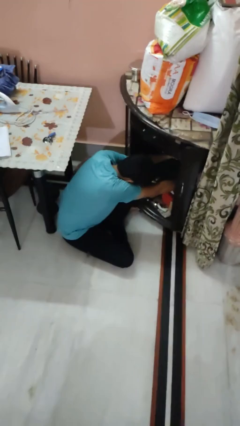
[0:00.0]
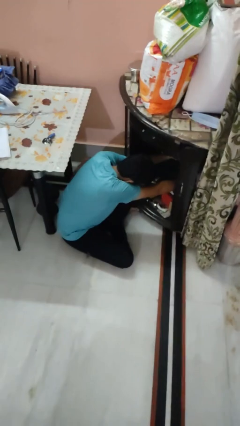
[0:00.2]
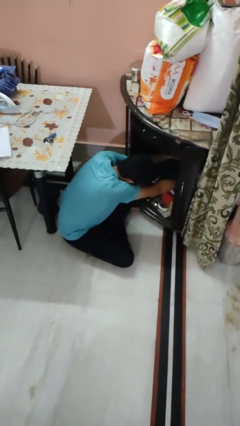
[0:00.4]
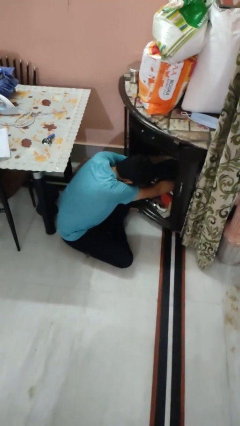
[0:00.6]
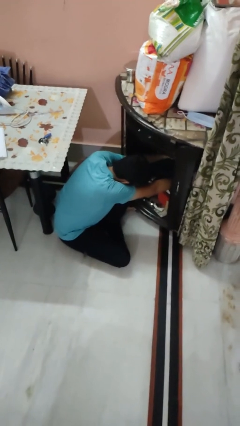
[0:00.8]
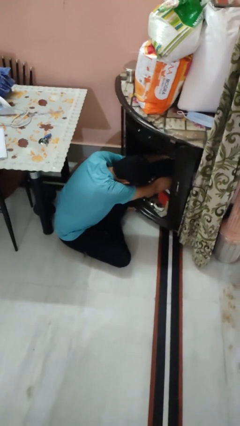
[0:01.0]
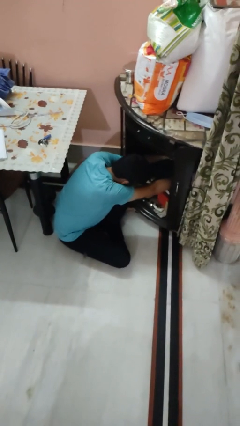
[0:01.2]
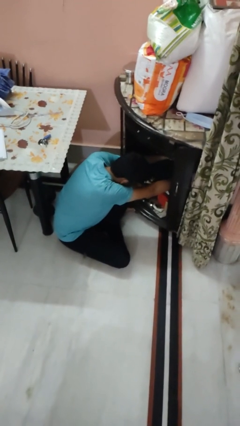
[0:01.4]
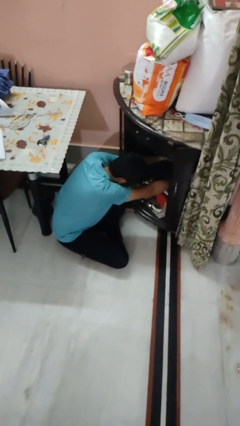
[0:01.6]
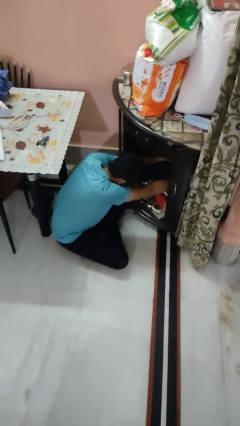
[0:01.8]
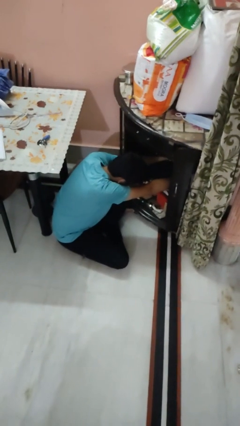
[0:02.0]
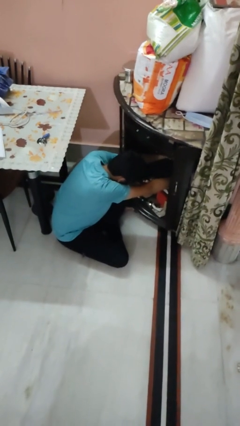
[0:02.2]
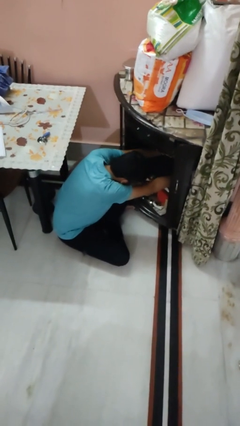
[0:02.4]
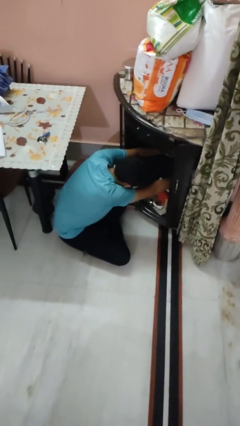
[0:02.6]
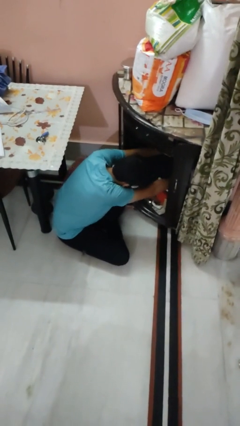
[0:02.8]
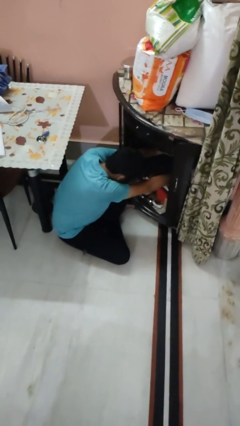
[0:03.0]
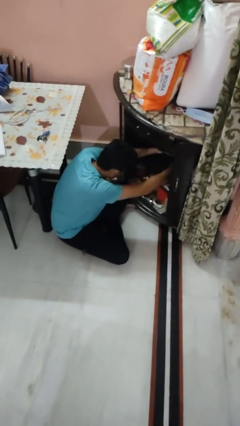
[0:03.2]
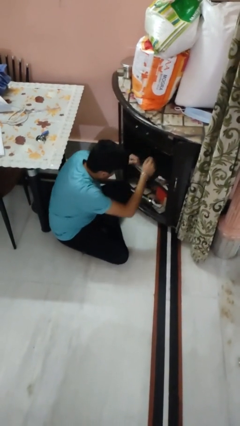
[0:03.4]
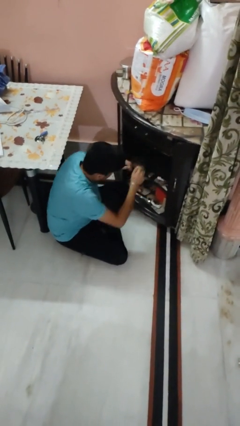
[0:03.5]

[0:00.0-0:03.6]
person searches in cabinet

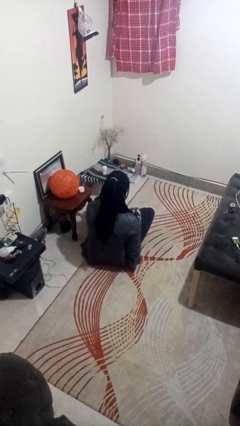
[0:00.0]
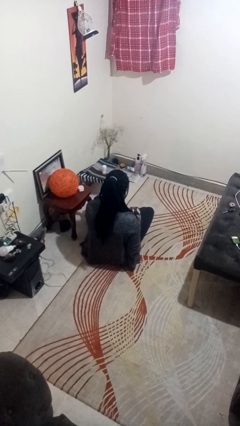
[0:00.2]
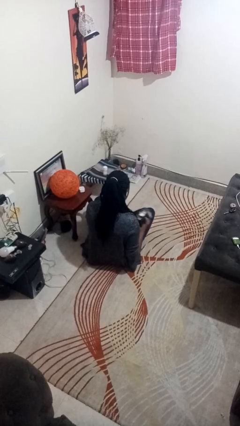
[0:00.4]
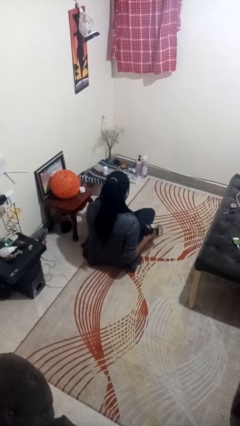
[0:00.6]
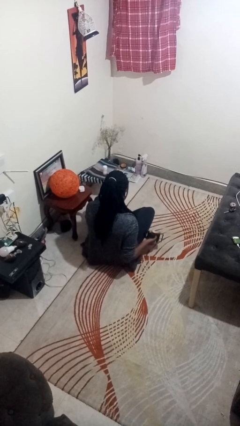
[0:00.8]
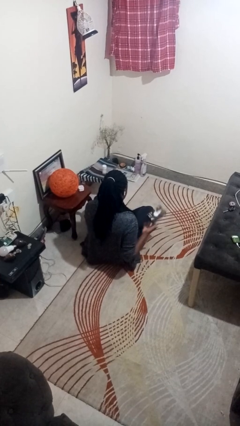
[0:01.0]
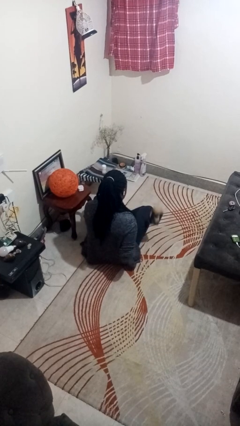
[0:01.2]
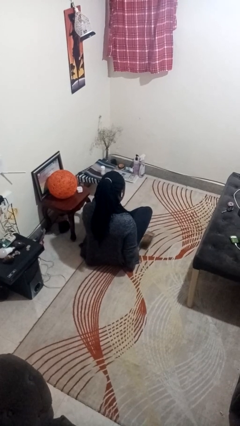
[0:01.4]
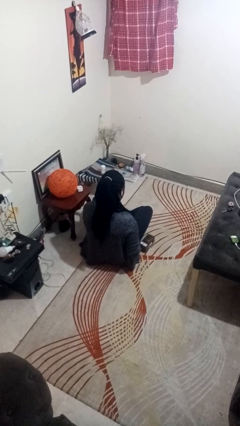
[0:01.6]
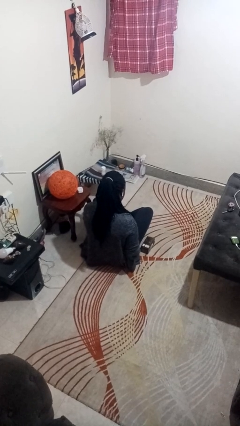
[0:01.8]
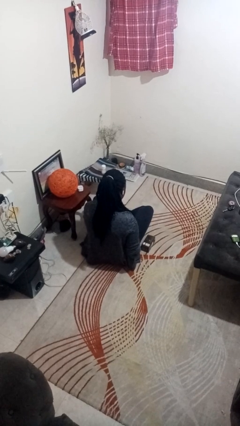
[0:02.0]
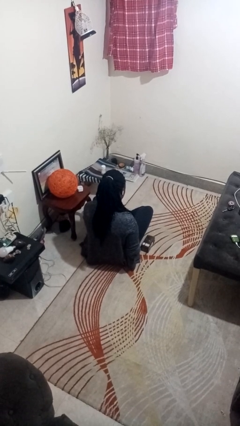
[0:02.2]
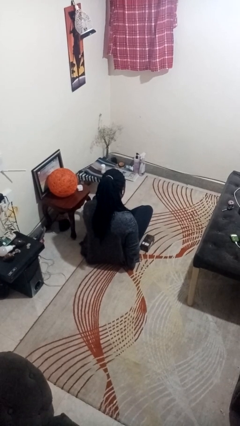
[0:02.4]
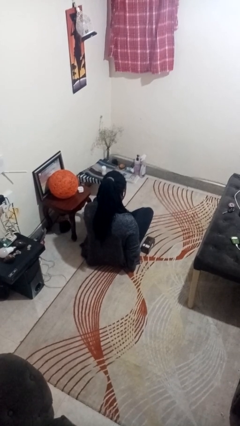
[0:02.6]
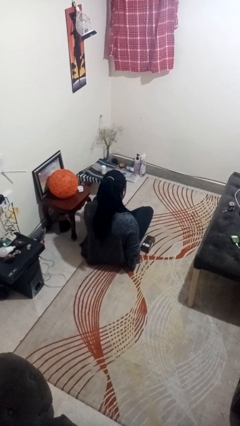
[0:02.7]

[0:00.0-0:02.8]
person throws object into air

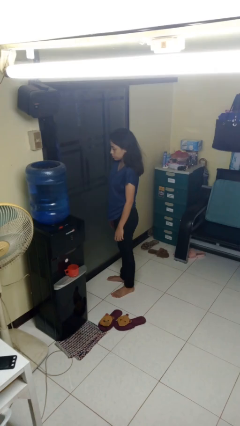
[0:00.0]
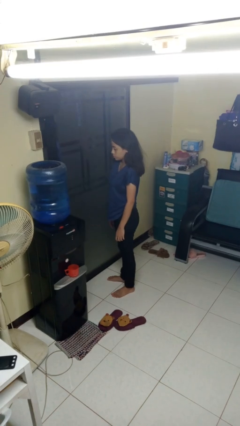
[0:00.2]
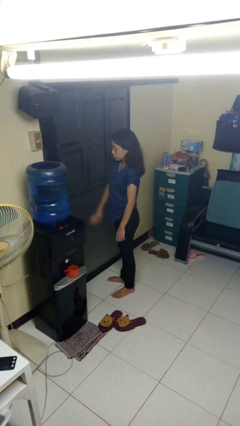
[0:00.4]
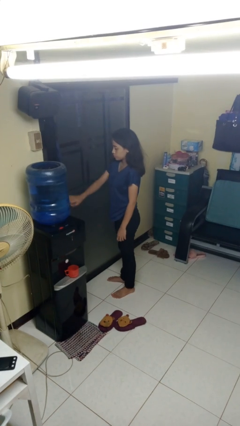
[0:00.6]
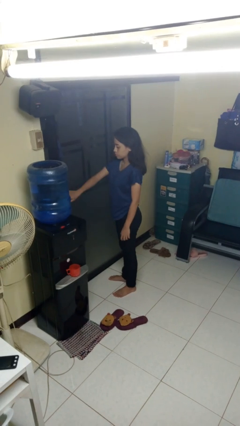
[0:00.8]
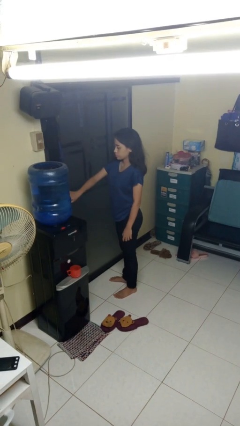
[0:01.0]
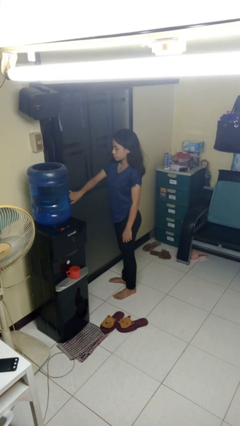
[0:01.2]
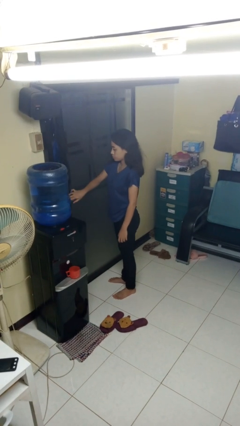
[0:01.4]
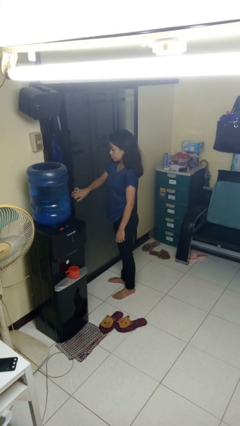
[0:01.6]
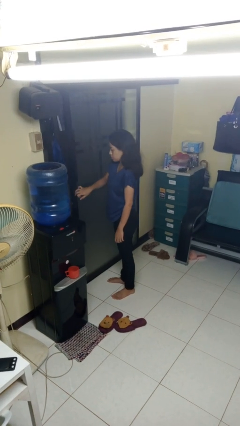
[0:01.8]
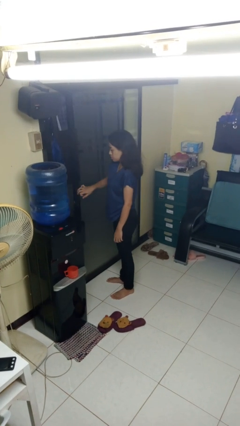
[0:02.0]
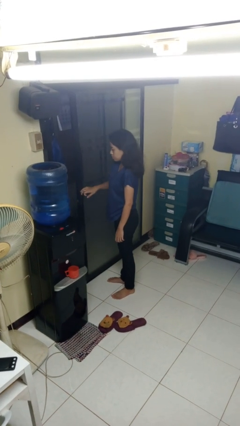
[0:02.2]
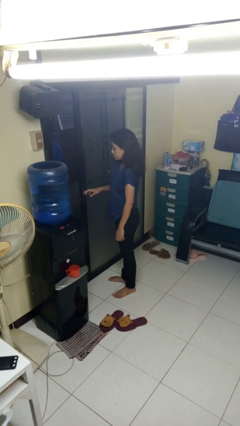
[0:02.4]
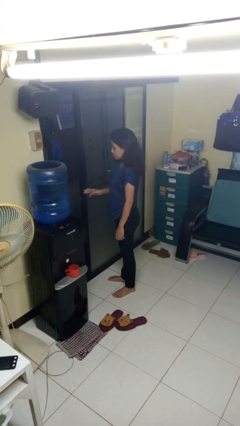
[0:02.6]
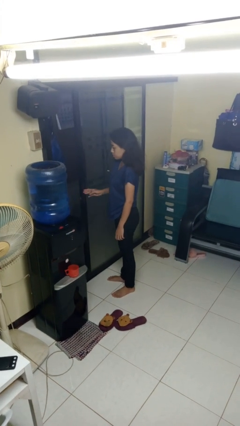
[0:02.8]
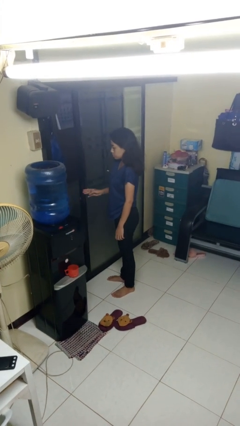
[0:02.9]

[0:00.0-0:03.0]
person opens sliding door

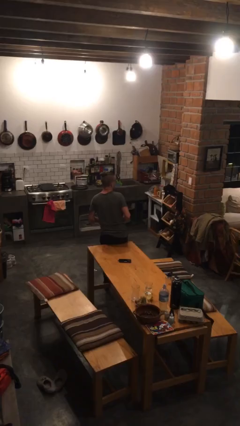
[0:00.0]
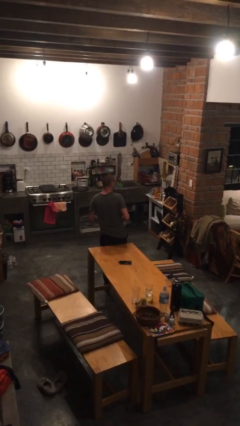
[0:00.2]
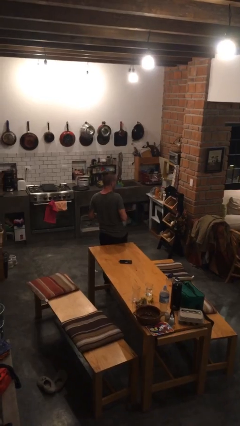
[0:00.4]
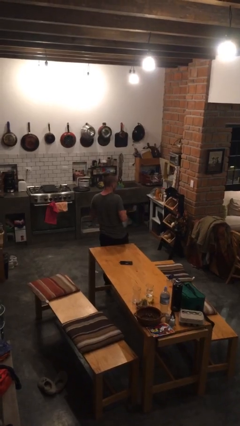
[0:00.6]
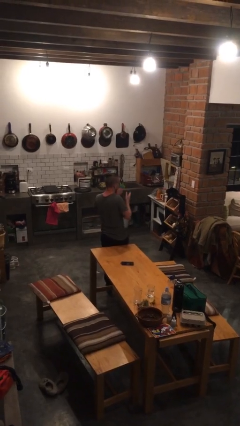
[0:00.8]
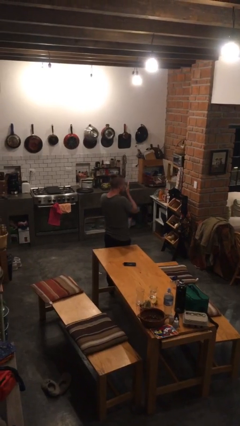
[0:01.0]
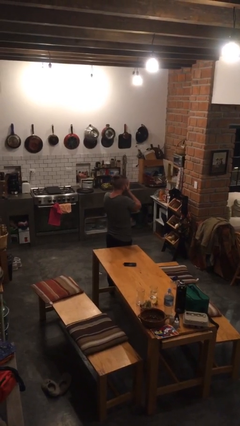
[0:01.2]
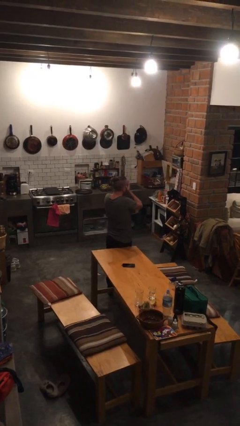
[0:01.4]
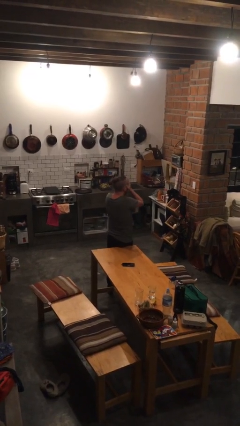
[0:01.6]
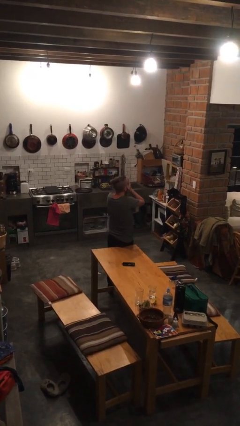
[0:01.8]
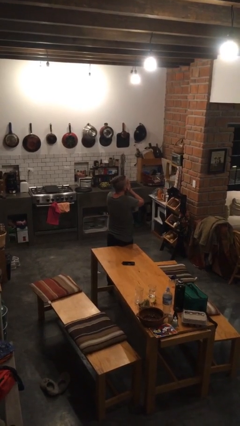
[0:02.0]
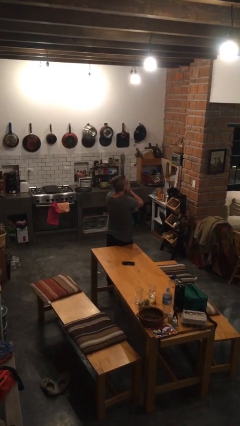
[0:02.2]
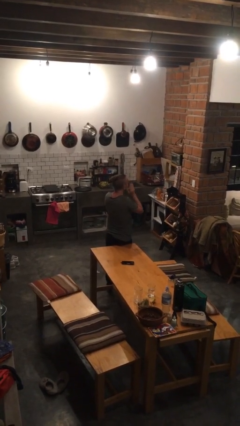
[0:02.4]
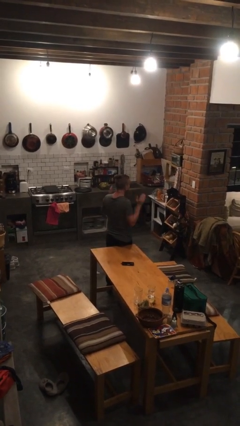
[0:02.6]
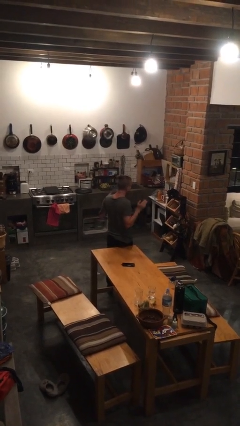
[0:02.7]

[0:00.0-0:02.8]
person covers face with hands

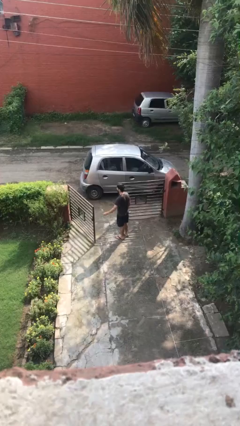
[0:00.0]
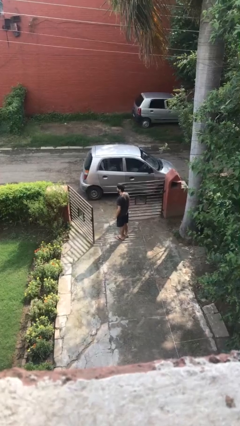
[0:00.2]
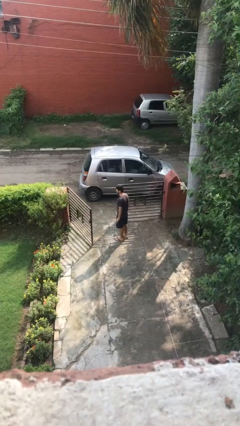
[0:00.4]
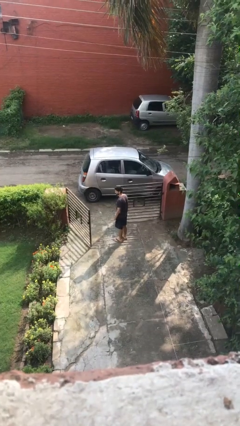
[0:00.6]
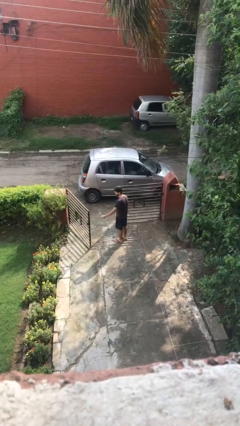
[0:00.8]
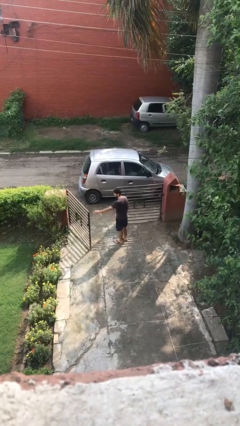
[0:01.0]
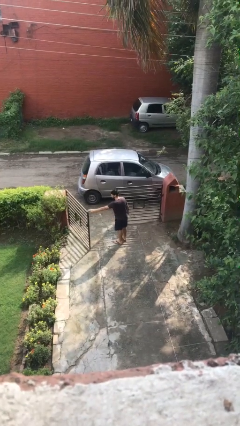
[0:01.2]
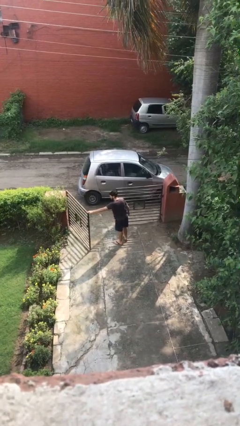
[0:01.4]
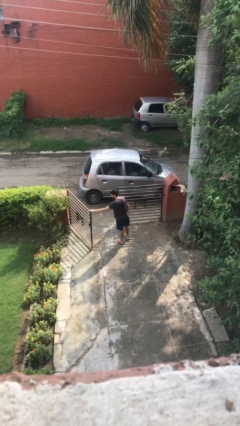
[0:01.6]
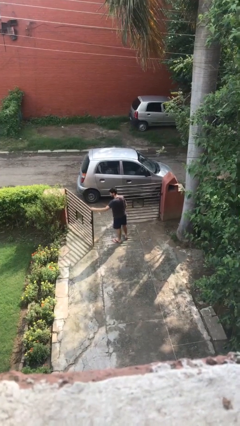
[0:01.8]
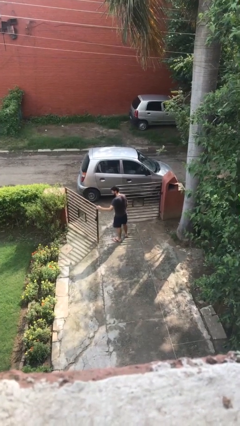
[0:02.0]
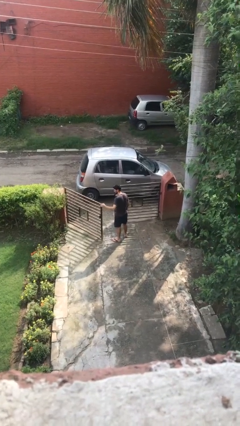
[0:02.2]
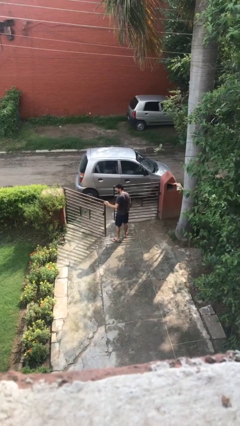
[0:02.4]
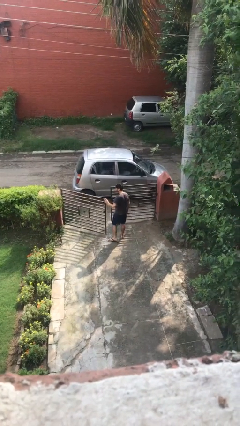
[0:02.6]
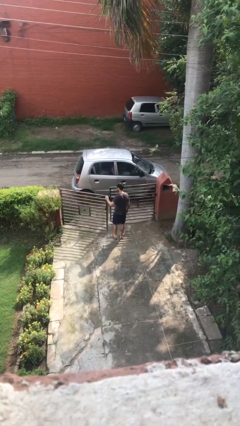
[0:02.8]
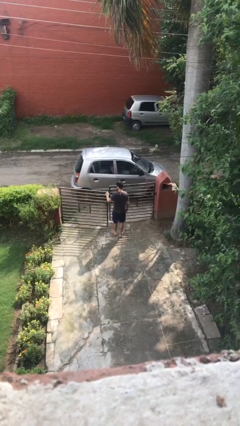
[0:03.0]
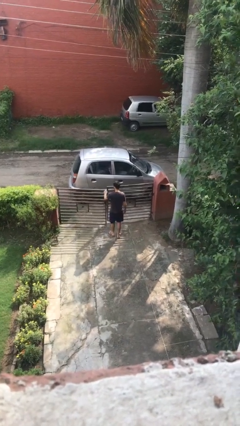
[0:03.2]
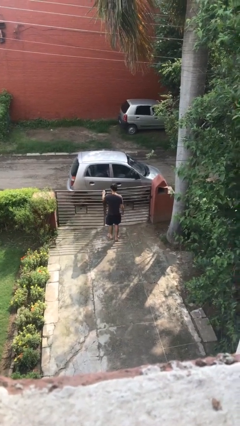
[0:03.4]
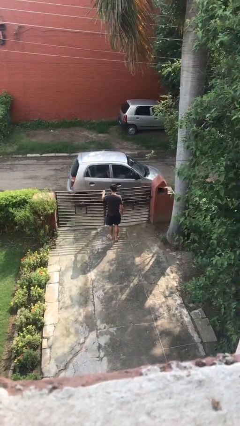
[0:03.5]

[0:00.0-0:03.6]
person closes gate

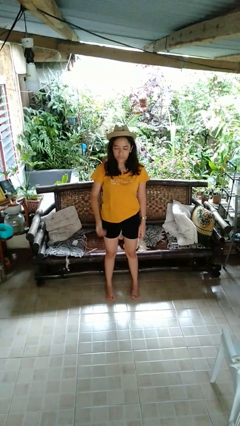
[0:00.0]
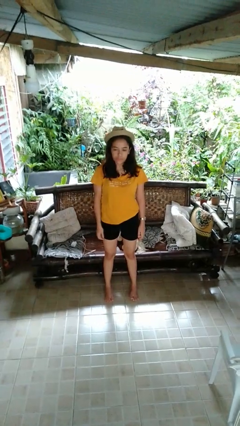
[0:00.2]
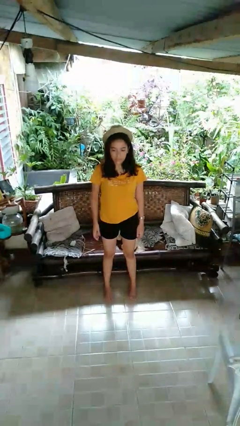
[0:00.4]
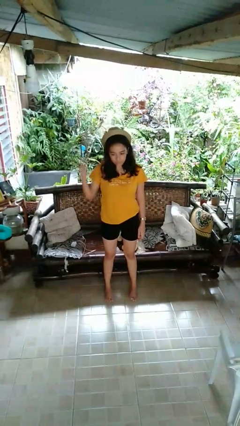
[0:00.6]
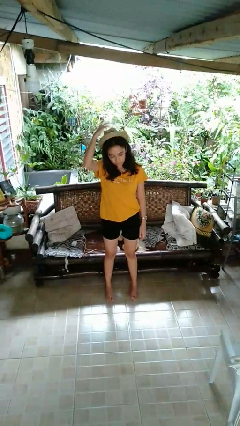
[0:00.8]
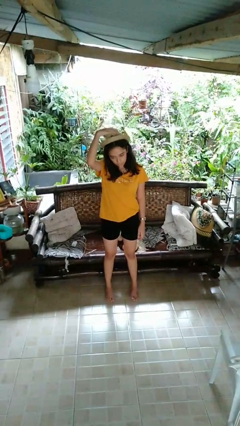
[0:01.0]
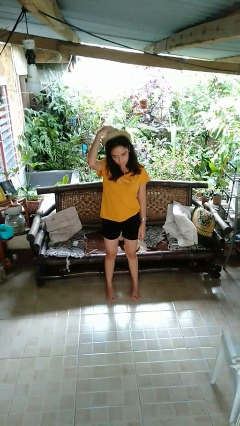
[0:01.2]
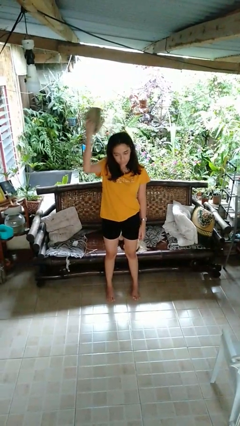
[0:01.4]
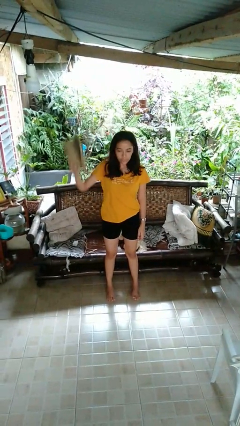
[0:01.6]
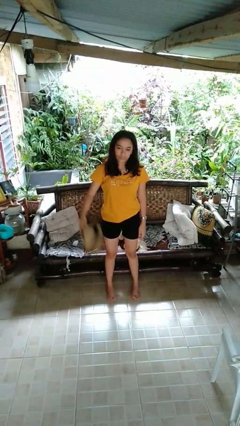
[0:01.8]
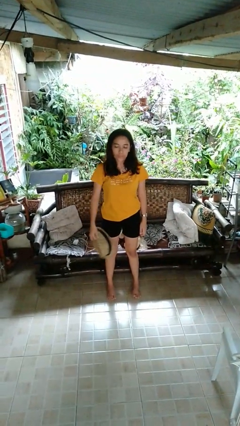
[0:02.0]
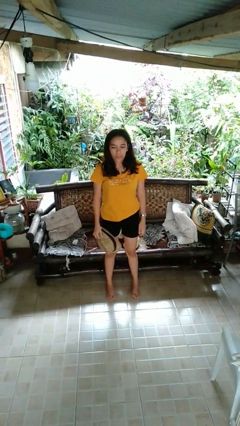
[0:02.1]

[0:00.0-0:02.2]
person takes off hat
